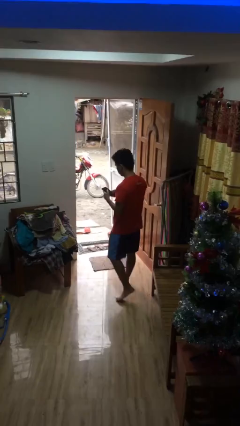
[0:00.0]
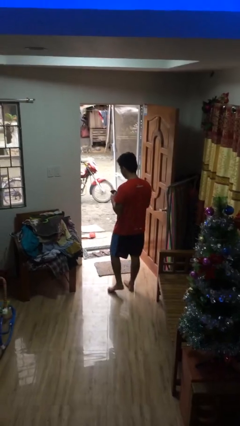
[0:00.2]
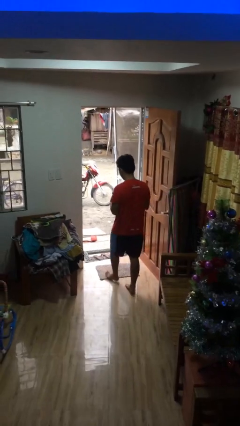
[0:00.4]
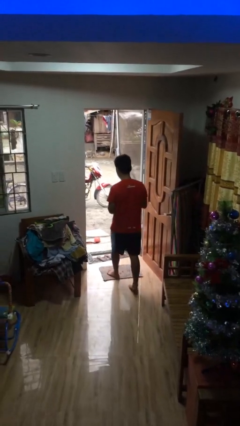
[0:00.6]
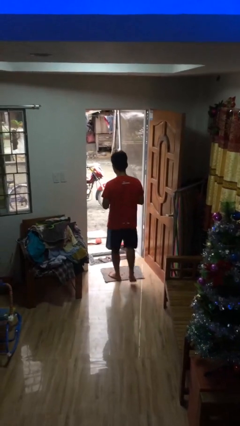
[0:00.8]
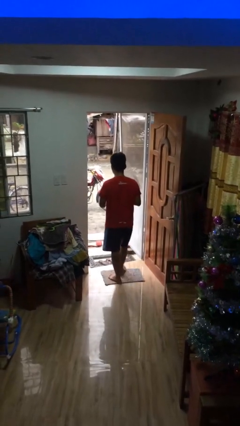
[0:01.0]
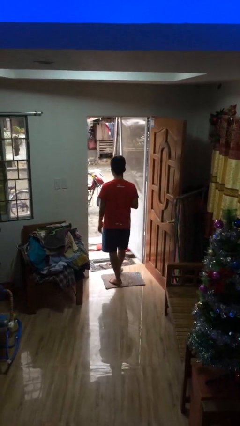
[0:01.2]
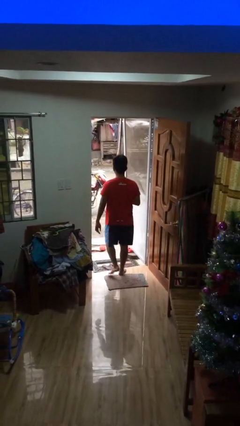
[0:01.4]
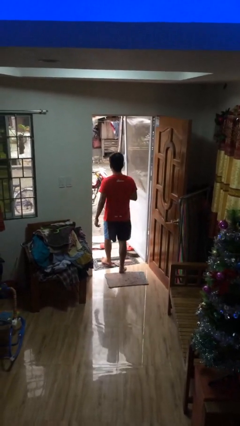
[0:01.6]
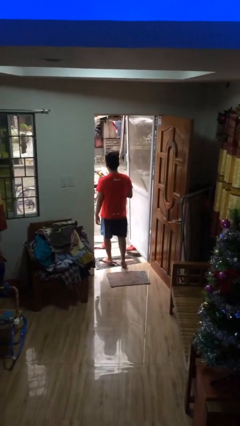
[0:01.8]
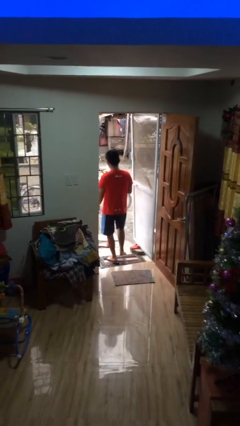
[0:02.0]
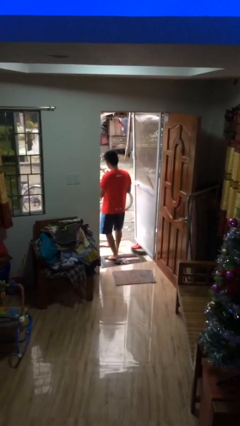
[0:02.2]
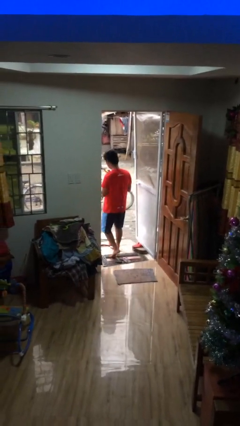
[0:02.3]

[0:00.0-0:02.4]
person exits scene through structure

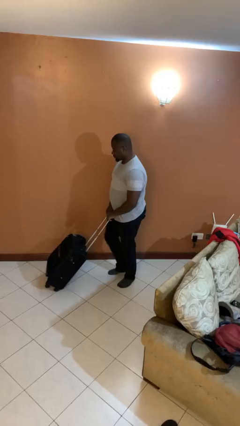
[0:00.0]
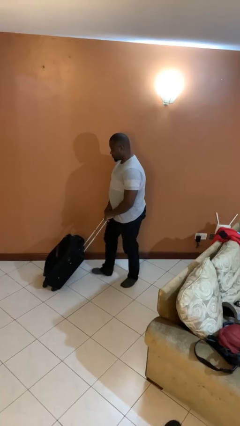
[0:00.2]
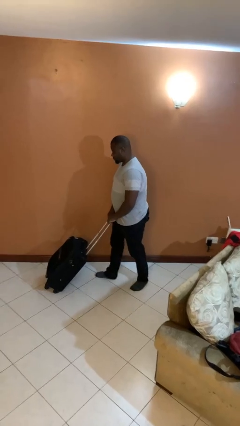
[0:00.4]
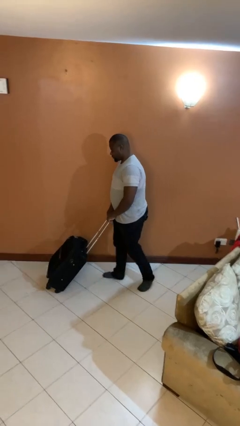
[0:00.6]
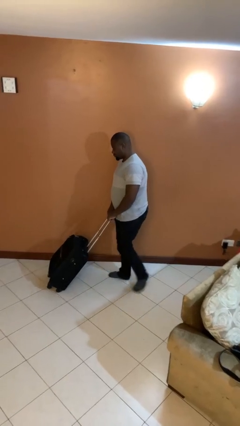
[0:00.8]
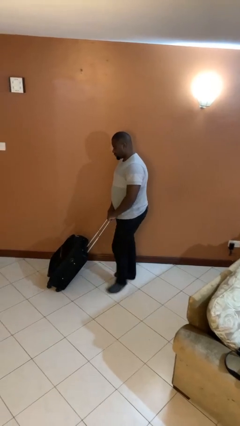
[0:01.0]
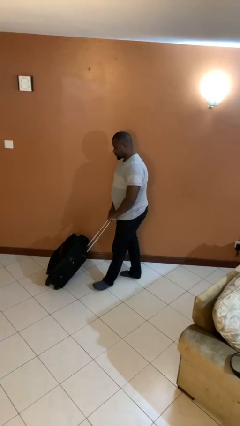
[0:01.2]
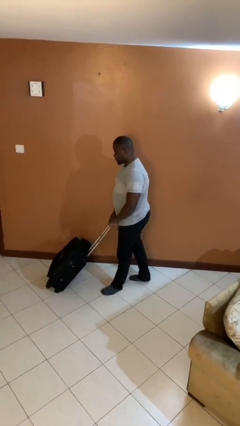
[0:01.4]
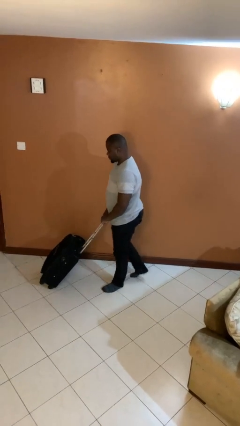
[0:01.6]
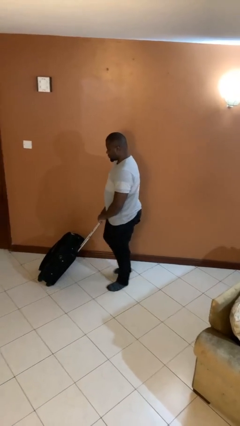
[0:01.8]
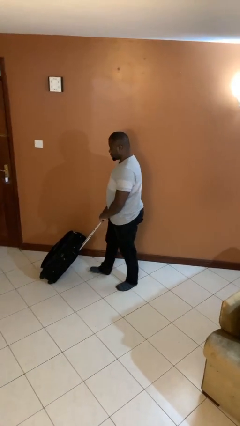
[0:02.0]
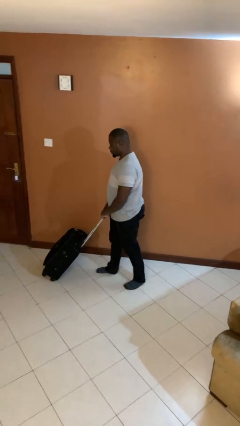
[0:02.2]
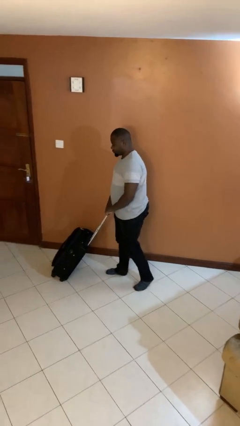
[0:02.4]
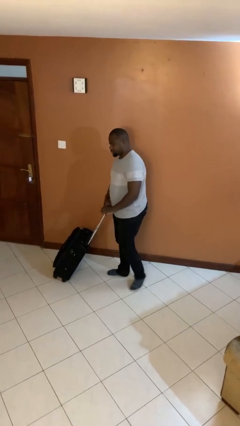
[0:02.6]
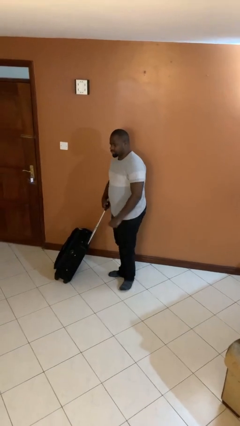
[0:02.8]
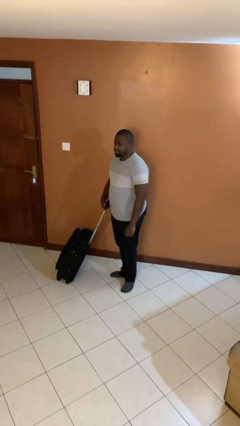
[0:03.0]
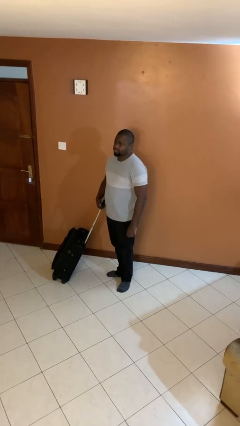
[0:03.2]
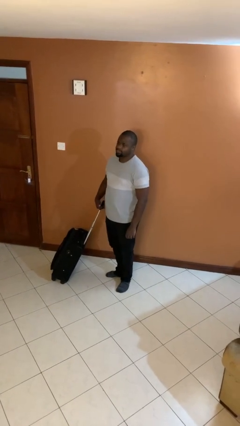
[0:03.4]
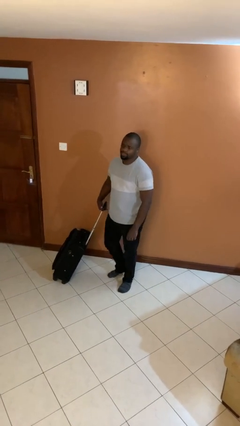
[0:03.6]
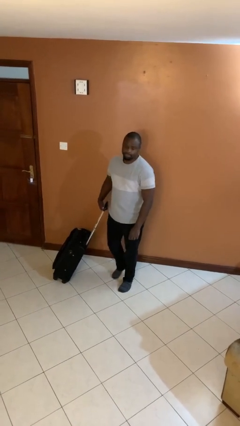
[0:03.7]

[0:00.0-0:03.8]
person pushes wheeled cart

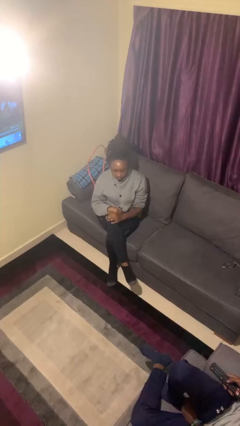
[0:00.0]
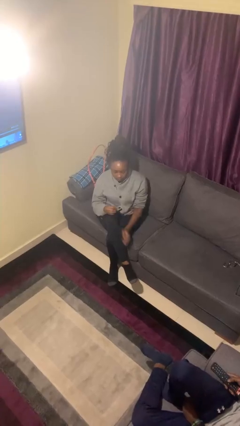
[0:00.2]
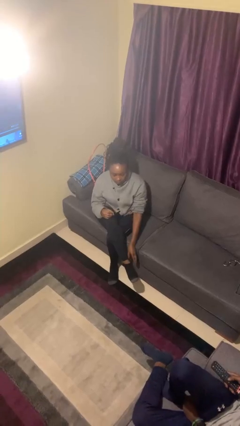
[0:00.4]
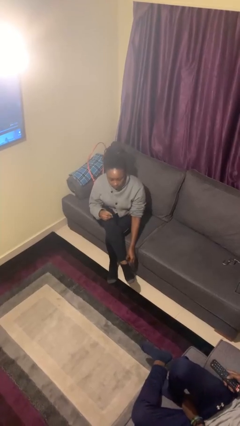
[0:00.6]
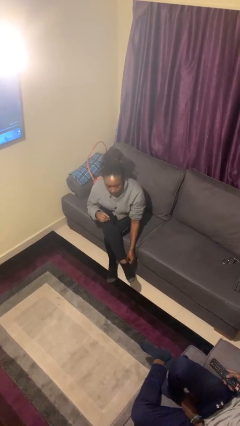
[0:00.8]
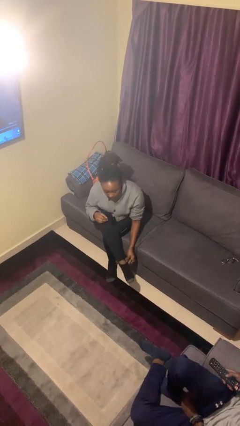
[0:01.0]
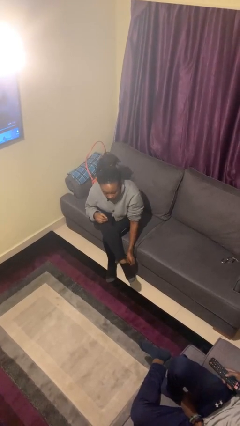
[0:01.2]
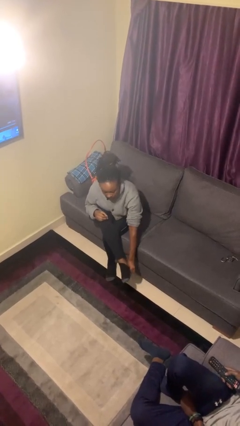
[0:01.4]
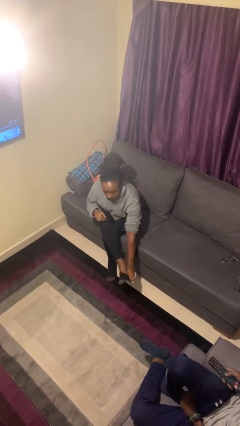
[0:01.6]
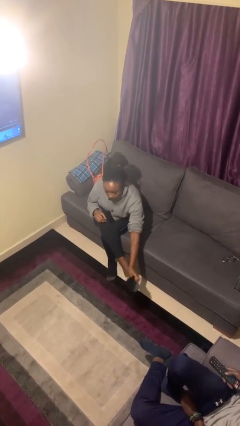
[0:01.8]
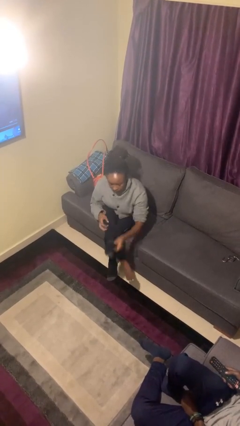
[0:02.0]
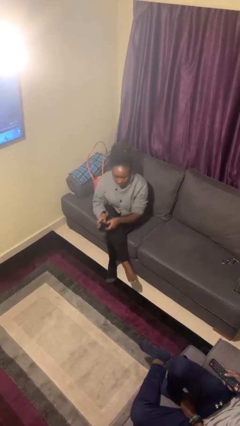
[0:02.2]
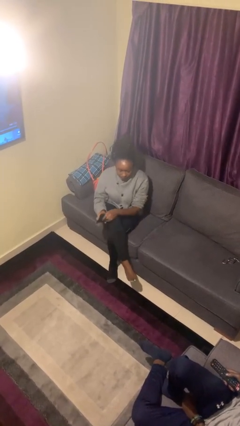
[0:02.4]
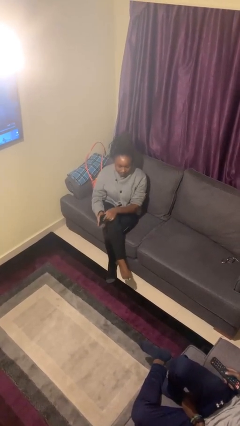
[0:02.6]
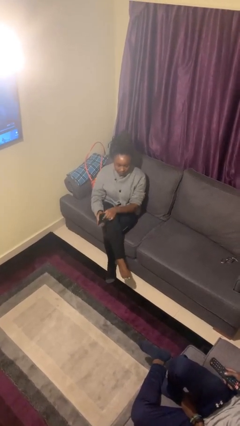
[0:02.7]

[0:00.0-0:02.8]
person takes off socks

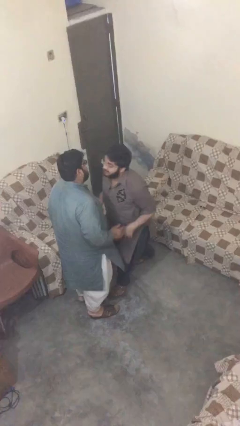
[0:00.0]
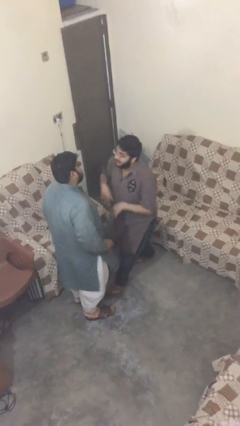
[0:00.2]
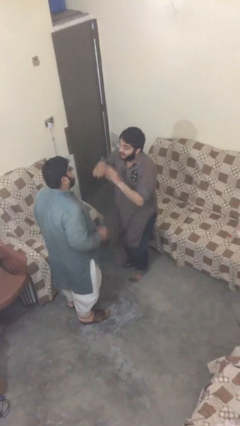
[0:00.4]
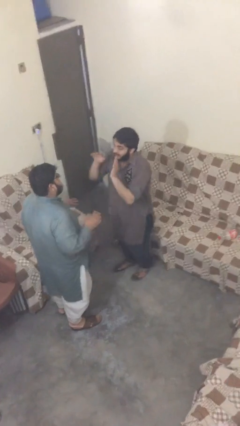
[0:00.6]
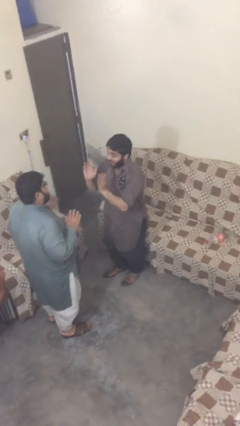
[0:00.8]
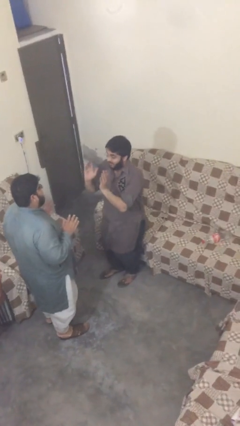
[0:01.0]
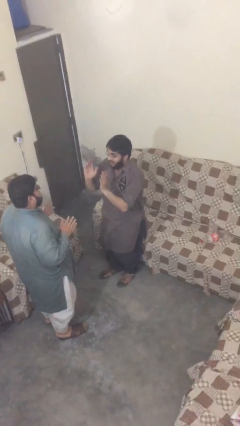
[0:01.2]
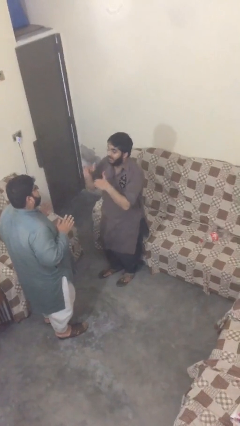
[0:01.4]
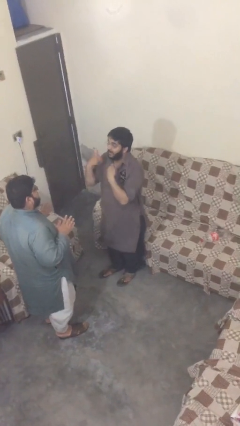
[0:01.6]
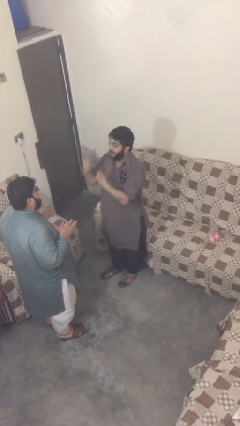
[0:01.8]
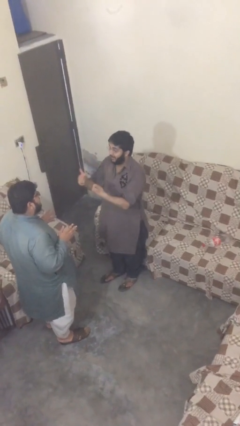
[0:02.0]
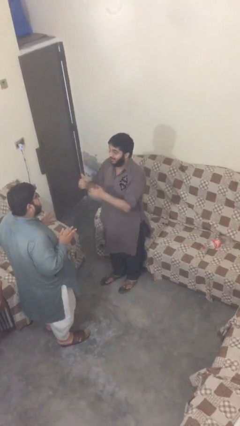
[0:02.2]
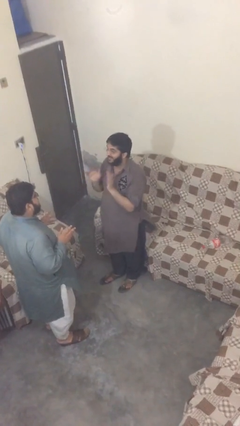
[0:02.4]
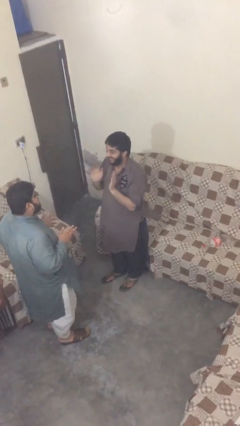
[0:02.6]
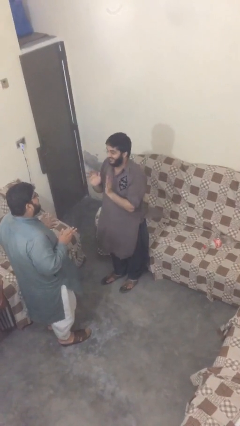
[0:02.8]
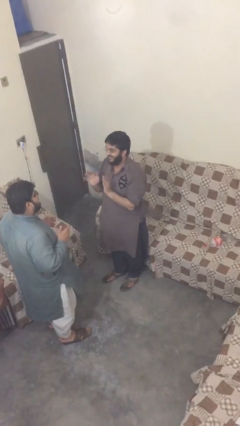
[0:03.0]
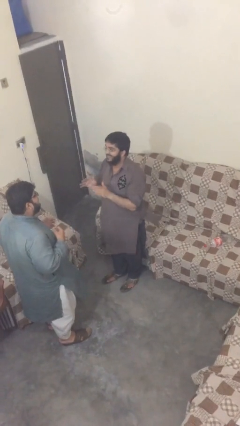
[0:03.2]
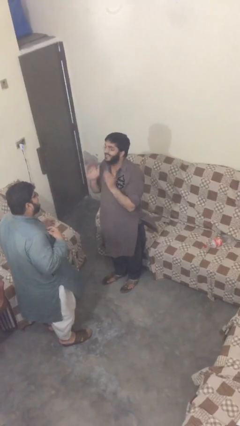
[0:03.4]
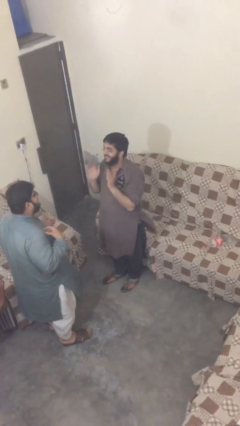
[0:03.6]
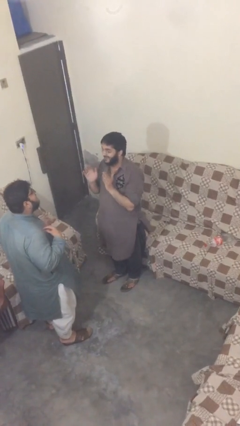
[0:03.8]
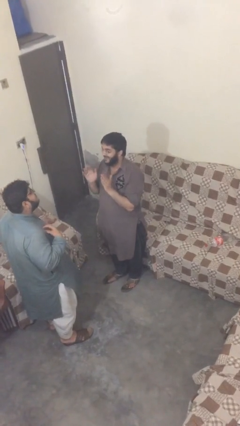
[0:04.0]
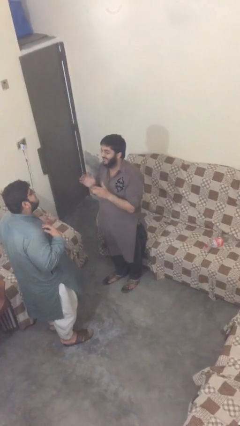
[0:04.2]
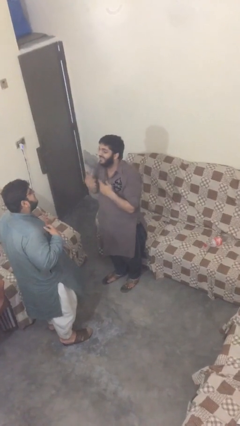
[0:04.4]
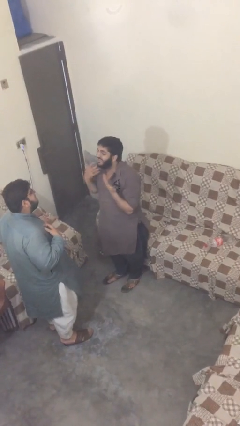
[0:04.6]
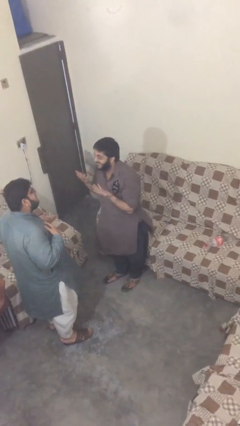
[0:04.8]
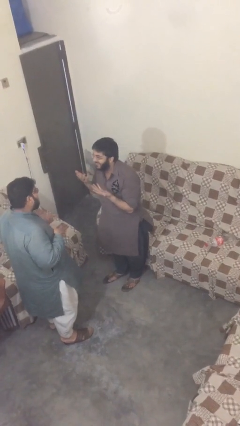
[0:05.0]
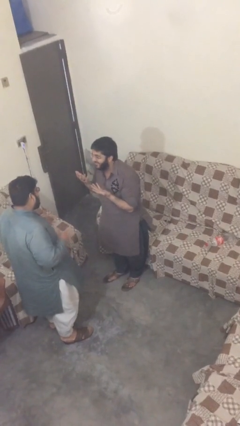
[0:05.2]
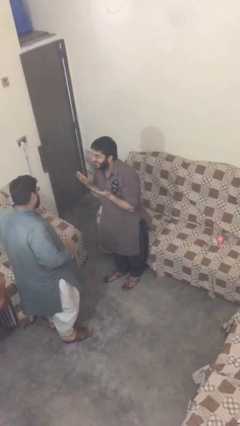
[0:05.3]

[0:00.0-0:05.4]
person talks to person

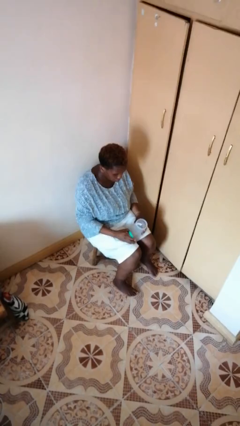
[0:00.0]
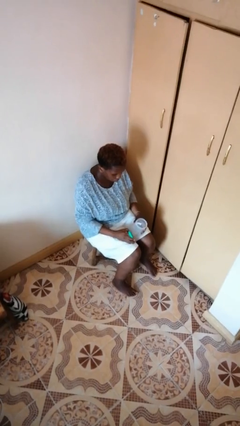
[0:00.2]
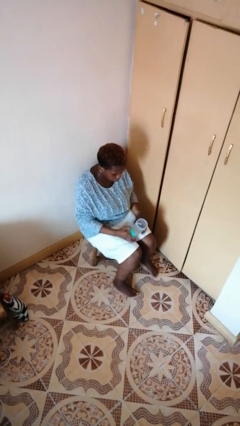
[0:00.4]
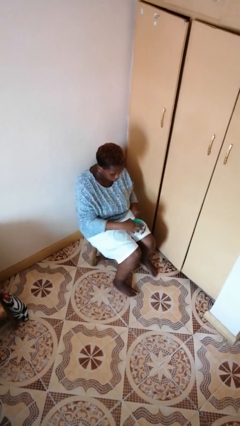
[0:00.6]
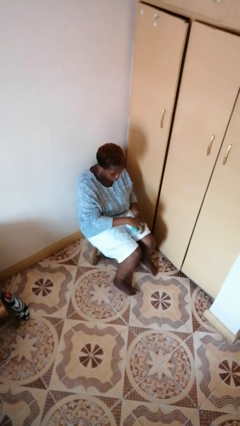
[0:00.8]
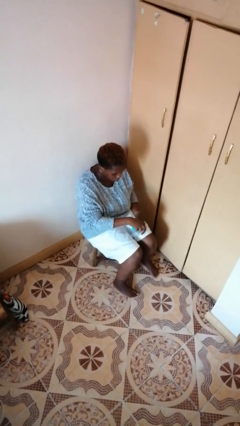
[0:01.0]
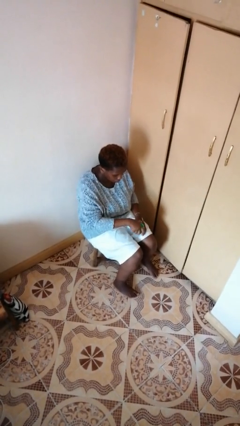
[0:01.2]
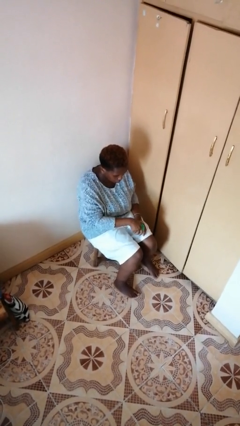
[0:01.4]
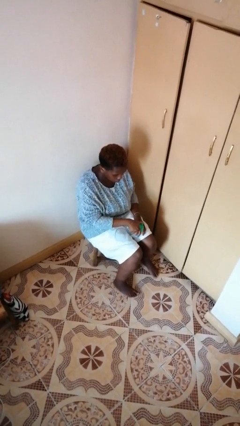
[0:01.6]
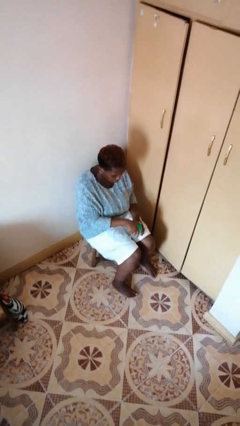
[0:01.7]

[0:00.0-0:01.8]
person closes jar

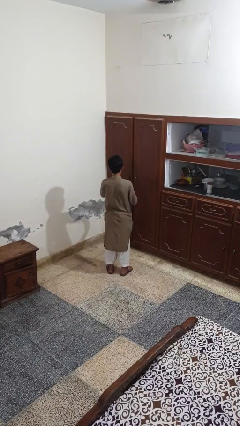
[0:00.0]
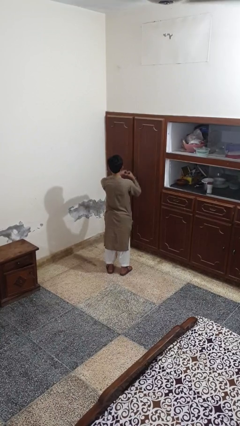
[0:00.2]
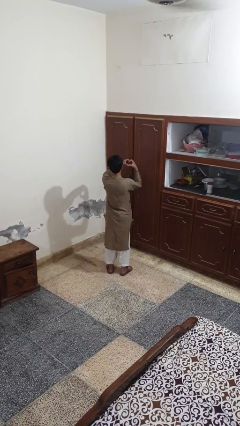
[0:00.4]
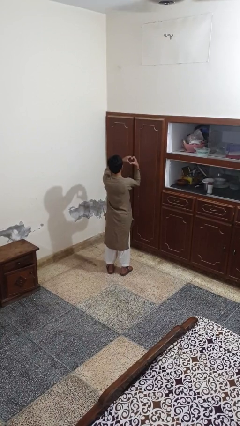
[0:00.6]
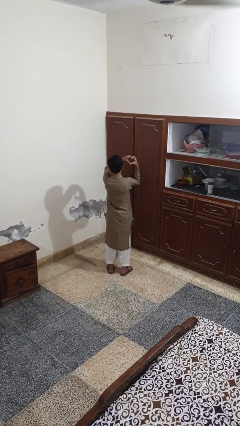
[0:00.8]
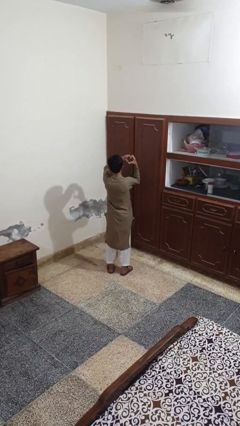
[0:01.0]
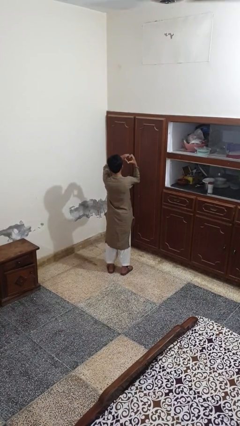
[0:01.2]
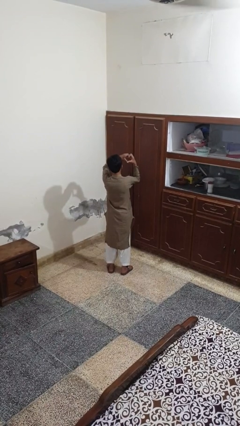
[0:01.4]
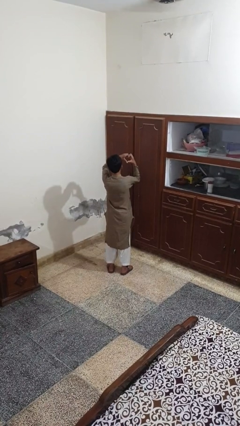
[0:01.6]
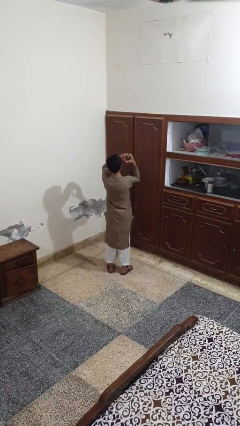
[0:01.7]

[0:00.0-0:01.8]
person gestures heart
